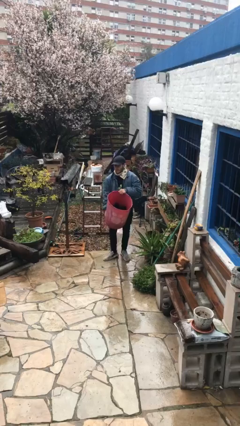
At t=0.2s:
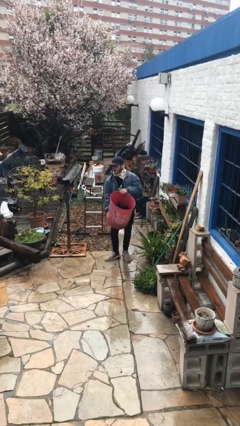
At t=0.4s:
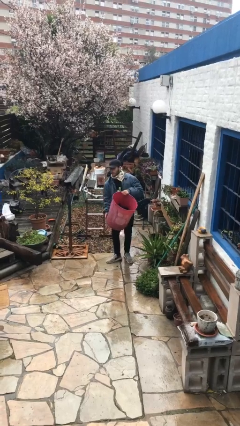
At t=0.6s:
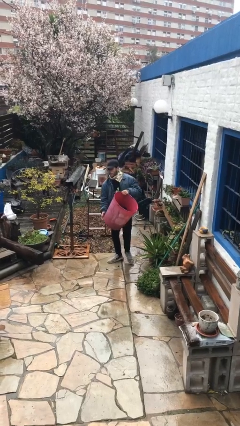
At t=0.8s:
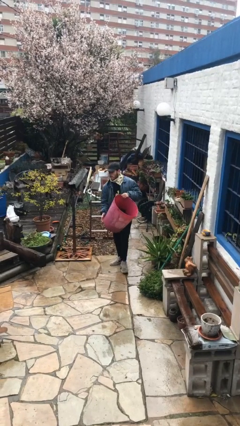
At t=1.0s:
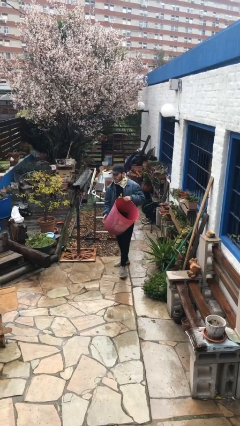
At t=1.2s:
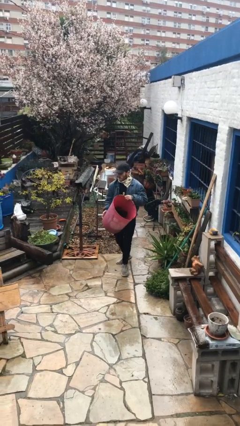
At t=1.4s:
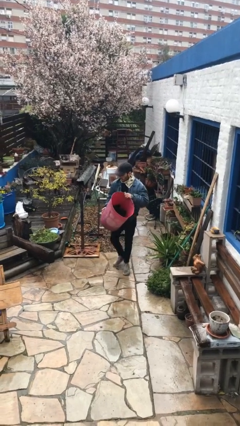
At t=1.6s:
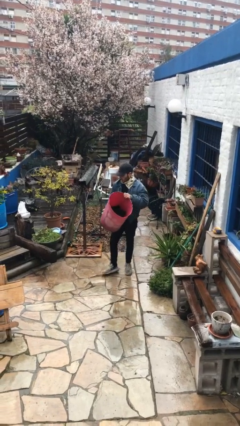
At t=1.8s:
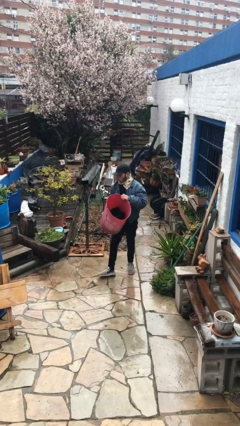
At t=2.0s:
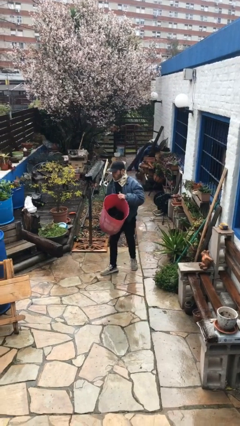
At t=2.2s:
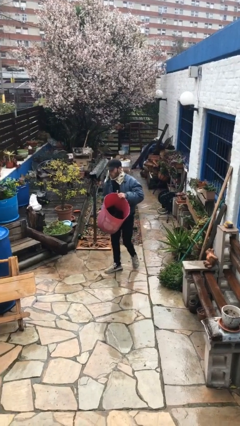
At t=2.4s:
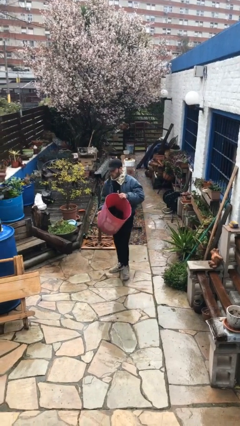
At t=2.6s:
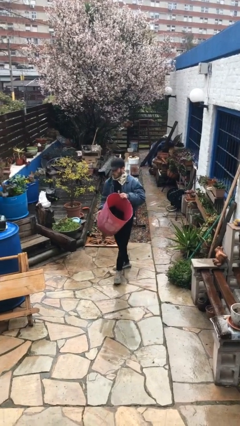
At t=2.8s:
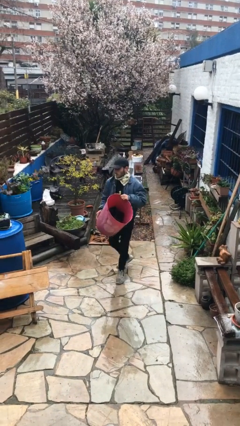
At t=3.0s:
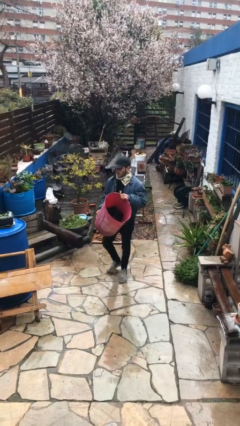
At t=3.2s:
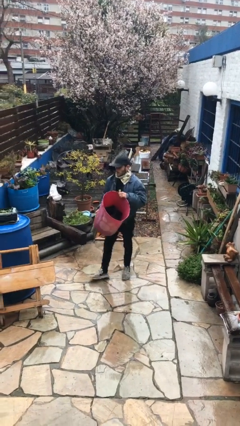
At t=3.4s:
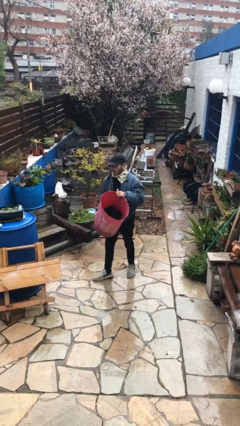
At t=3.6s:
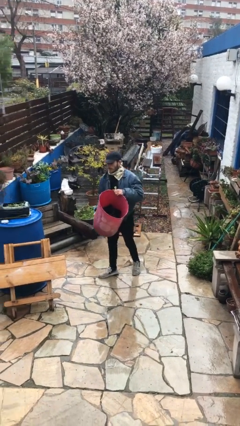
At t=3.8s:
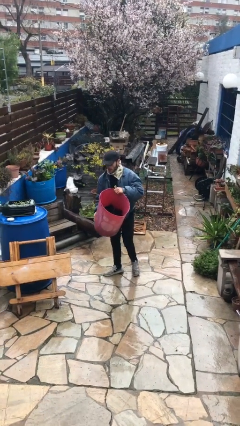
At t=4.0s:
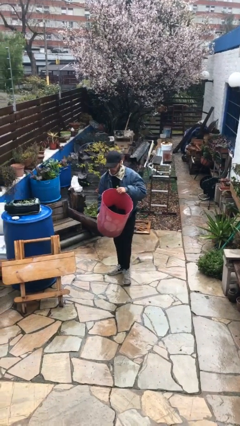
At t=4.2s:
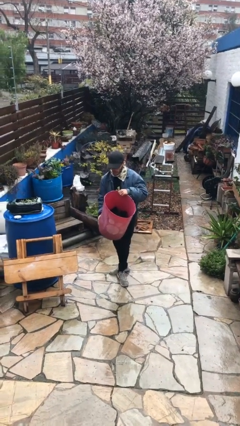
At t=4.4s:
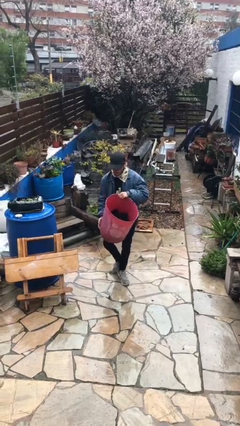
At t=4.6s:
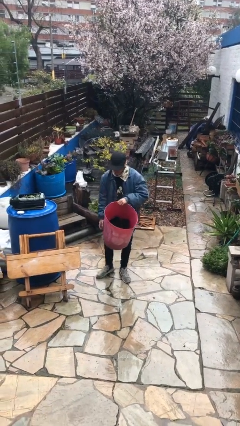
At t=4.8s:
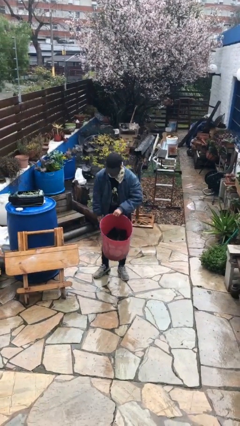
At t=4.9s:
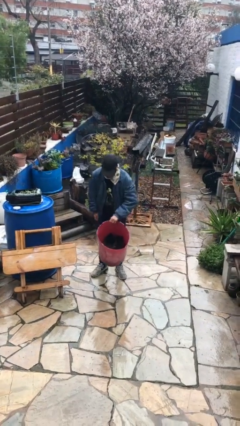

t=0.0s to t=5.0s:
person carries heavy object

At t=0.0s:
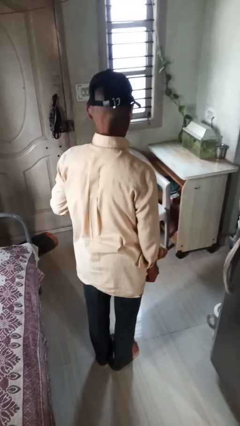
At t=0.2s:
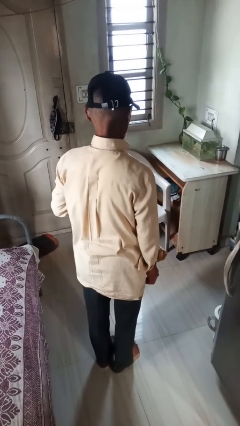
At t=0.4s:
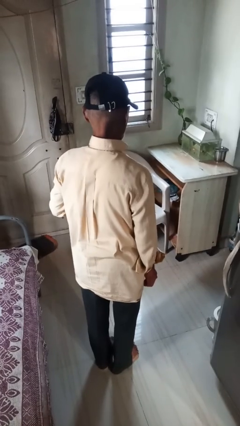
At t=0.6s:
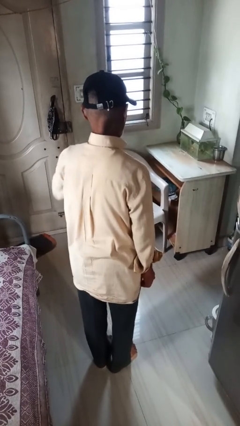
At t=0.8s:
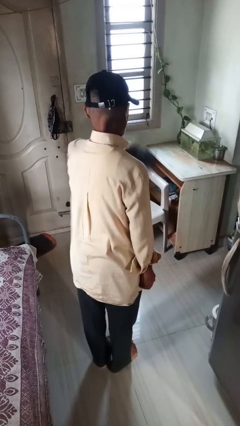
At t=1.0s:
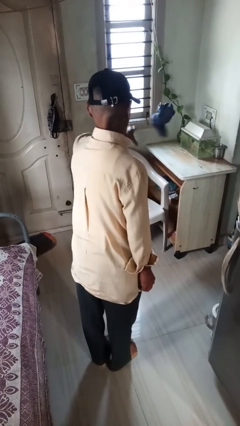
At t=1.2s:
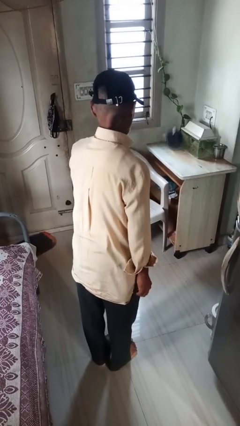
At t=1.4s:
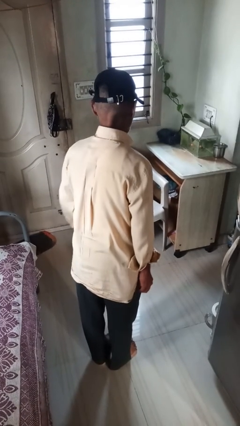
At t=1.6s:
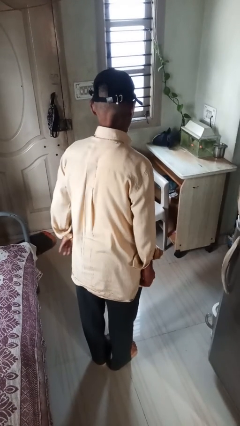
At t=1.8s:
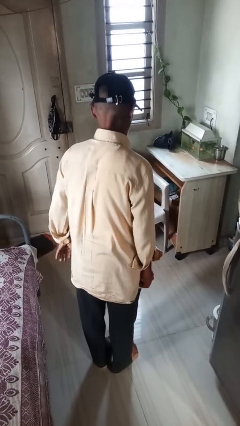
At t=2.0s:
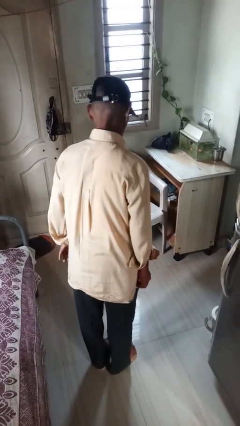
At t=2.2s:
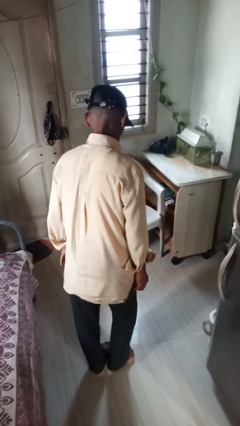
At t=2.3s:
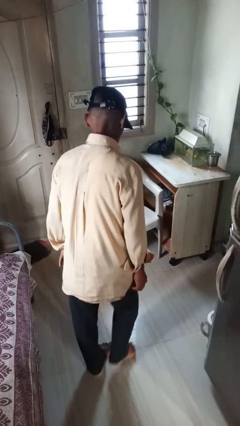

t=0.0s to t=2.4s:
person throws object on table

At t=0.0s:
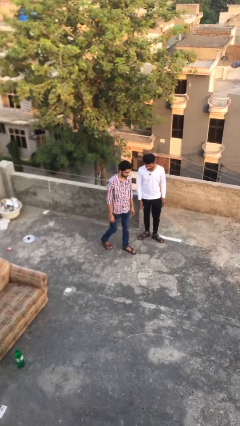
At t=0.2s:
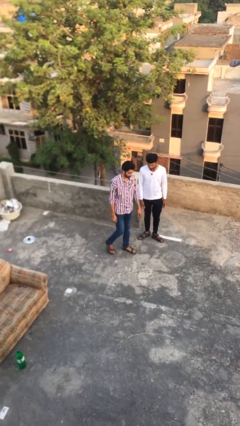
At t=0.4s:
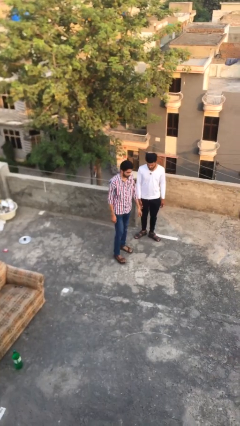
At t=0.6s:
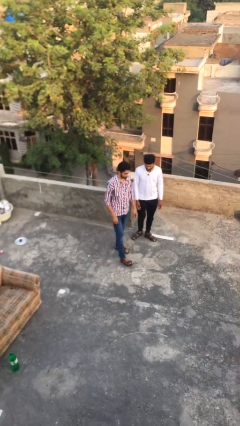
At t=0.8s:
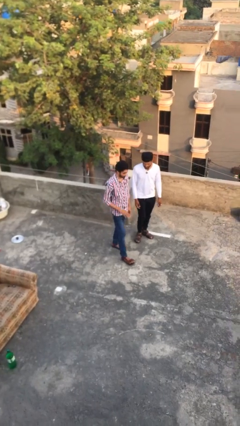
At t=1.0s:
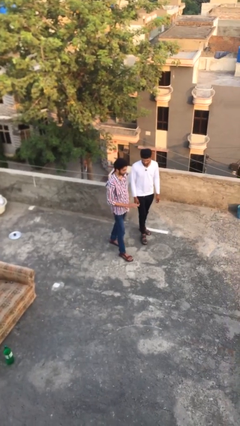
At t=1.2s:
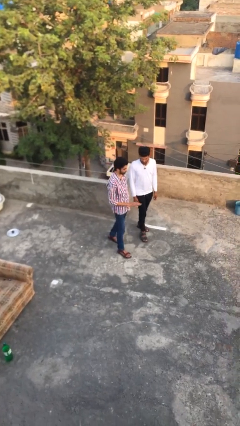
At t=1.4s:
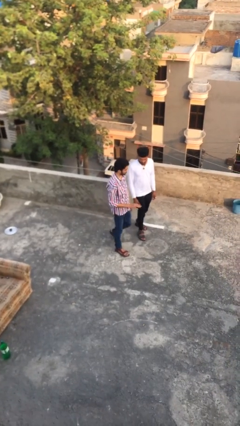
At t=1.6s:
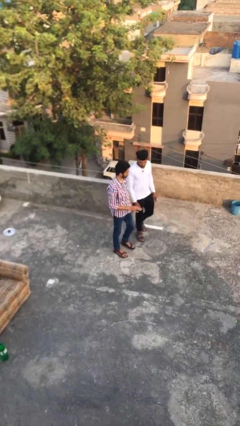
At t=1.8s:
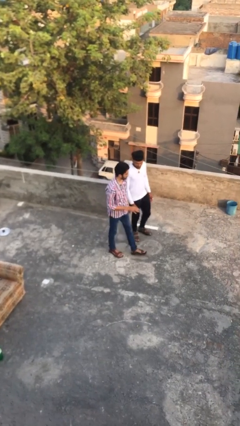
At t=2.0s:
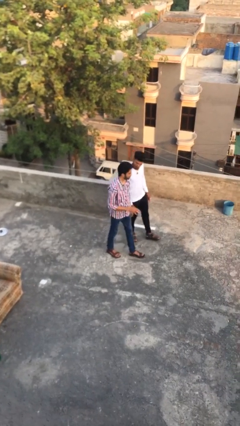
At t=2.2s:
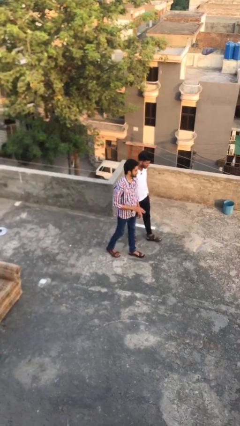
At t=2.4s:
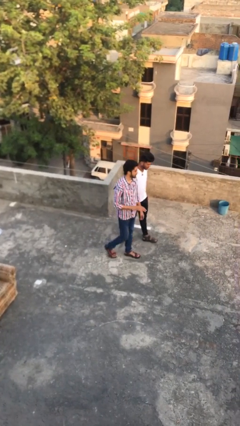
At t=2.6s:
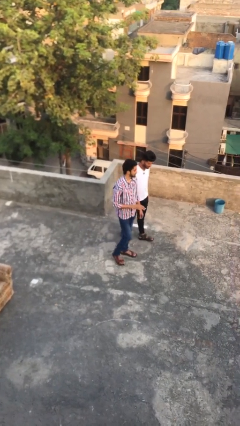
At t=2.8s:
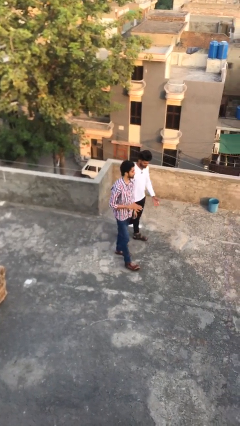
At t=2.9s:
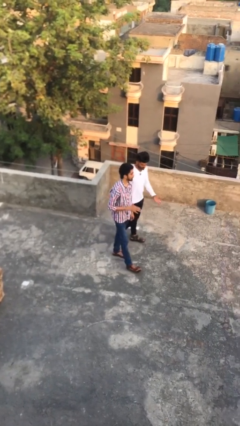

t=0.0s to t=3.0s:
person talks to person

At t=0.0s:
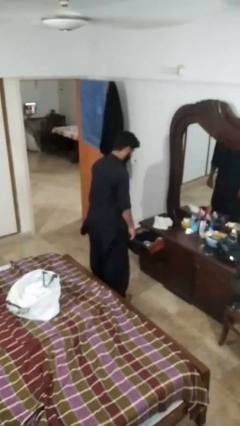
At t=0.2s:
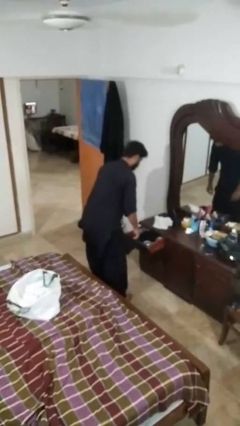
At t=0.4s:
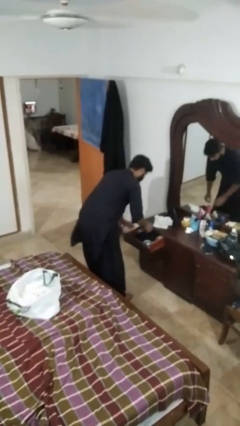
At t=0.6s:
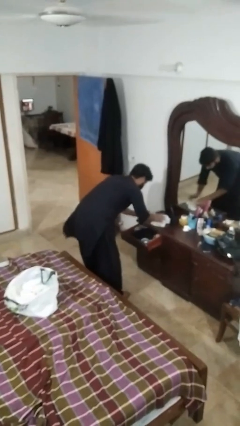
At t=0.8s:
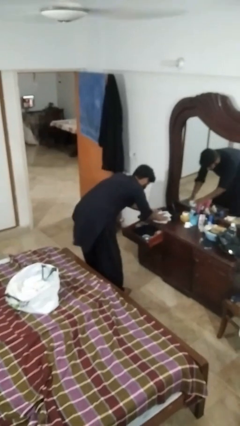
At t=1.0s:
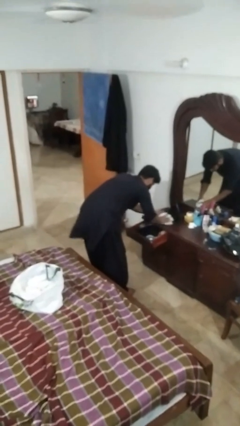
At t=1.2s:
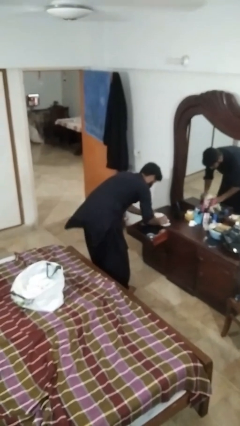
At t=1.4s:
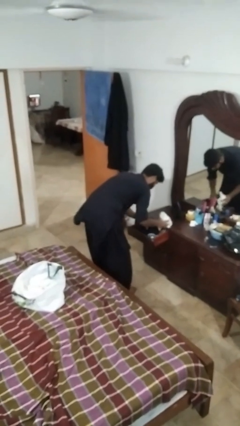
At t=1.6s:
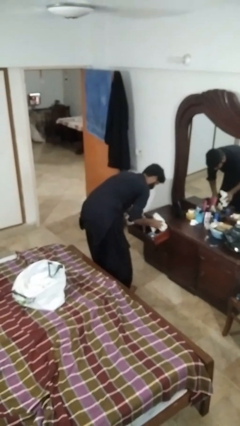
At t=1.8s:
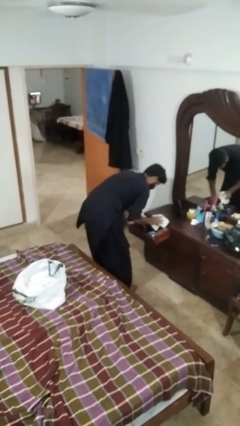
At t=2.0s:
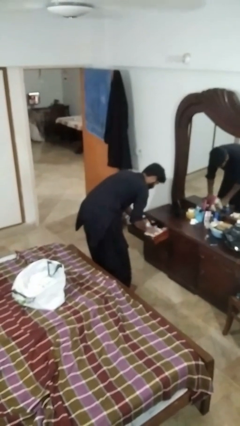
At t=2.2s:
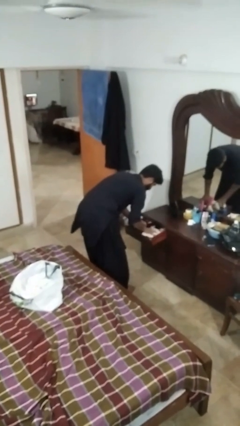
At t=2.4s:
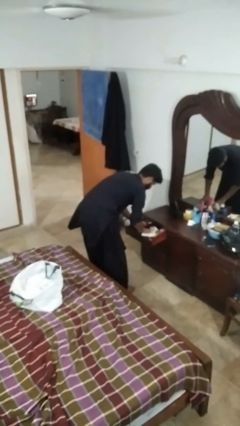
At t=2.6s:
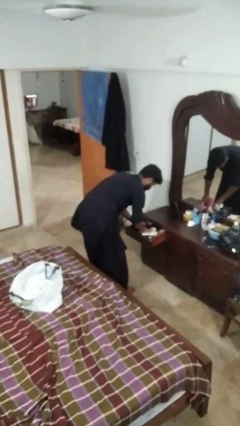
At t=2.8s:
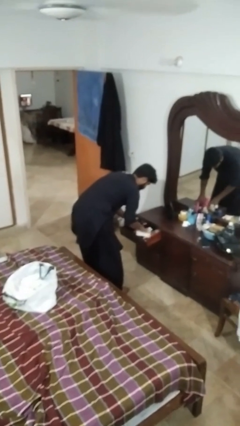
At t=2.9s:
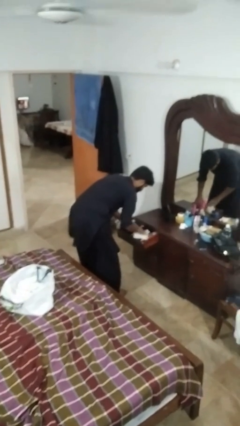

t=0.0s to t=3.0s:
person puts clothes into dresser

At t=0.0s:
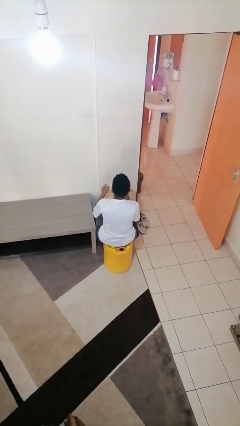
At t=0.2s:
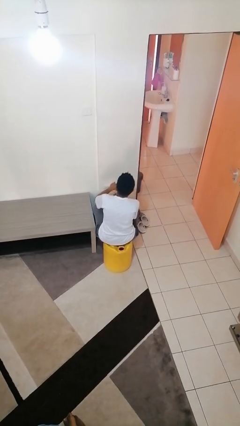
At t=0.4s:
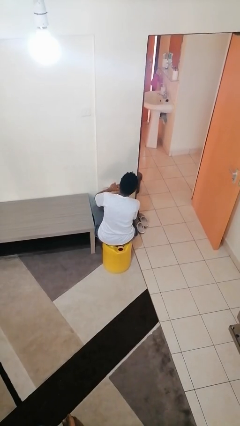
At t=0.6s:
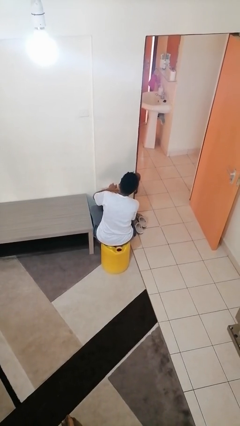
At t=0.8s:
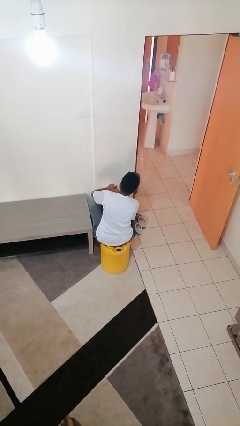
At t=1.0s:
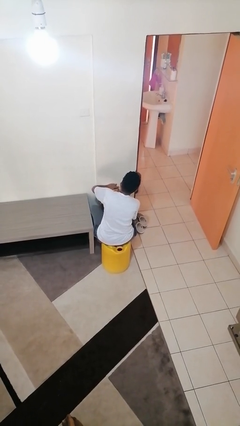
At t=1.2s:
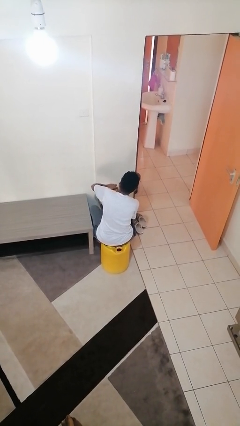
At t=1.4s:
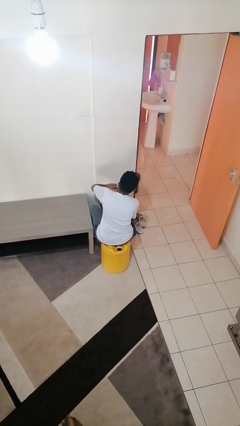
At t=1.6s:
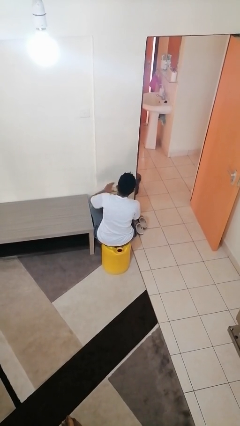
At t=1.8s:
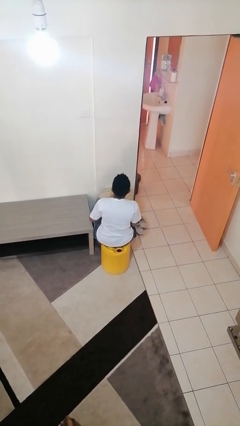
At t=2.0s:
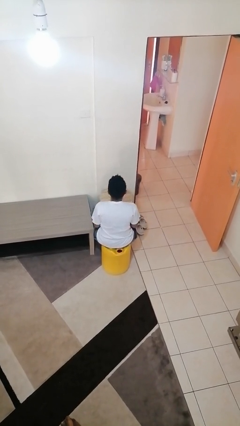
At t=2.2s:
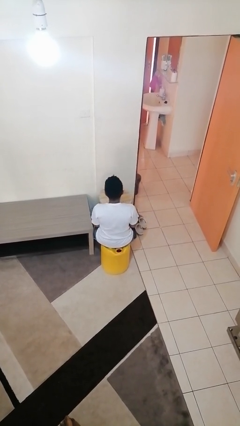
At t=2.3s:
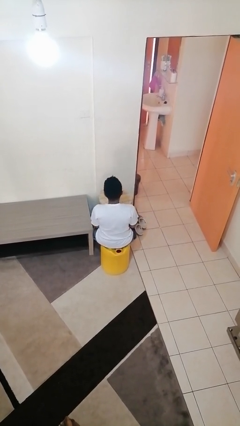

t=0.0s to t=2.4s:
person closes jar

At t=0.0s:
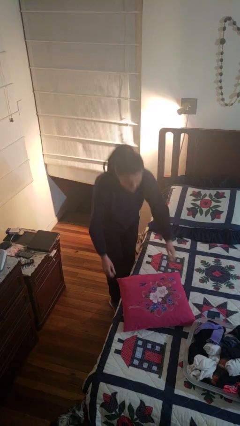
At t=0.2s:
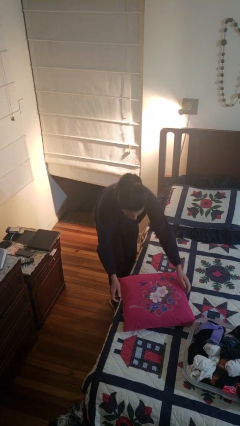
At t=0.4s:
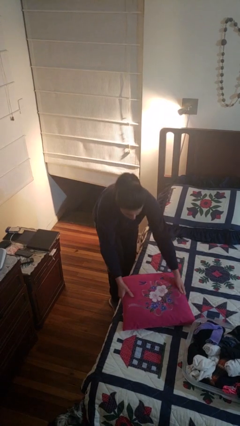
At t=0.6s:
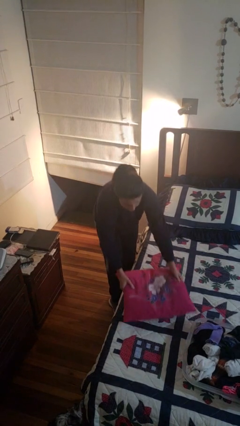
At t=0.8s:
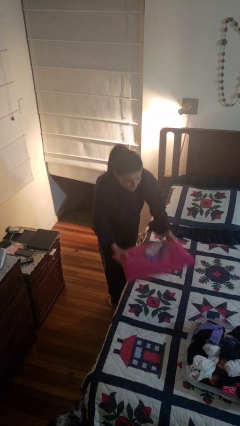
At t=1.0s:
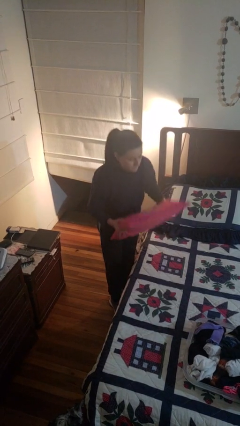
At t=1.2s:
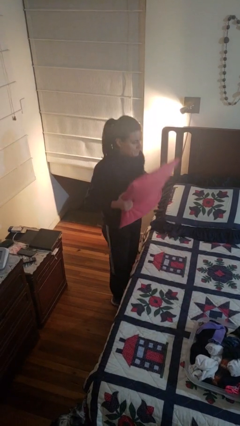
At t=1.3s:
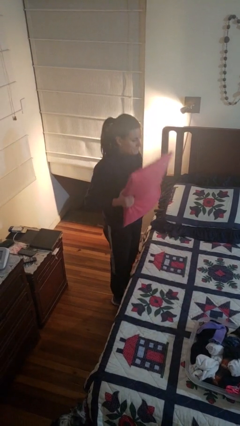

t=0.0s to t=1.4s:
person picks up object from bed
